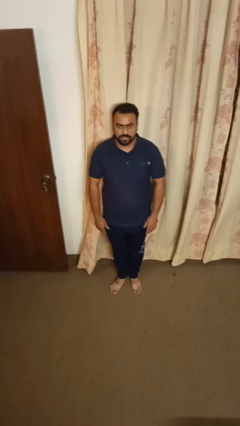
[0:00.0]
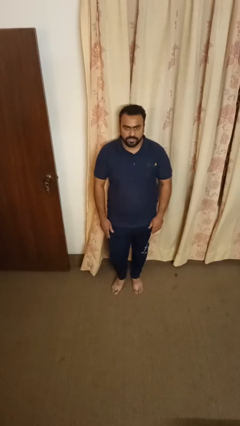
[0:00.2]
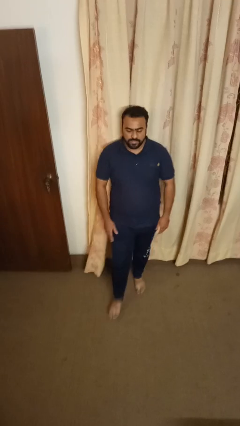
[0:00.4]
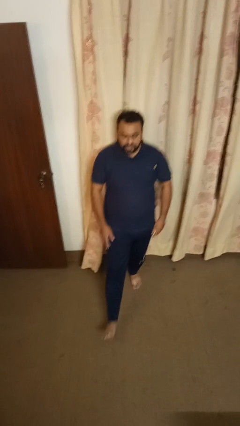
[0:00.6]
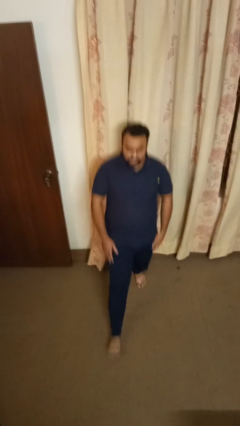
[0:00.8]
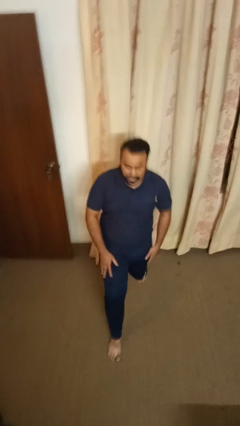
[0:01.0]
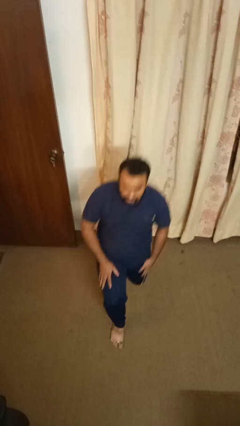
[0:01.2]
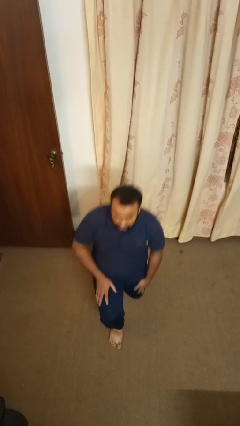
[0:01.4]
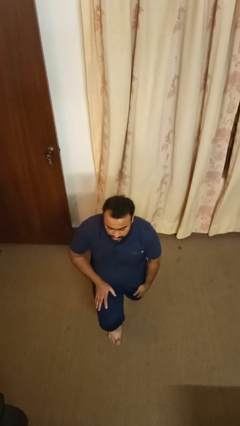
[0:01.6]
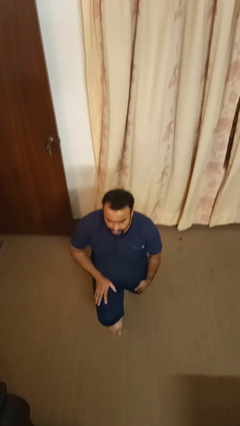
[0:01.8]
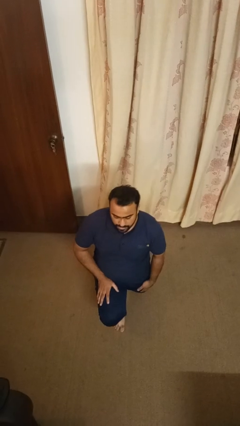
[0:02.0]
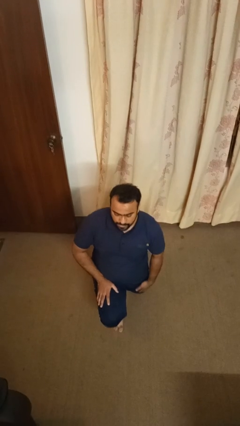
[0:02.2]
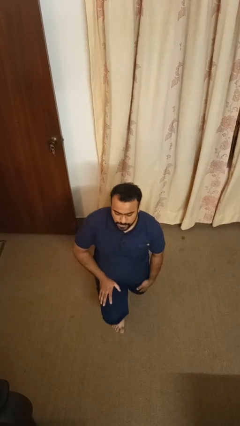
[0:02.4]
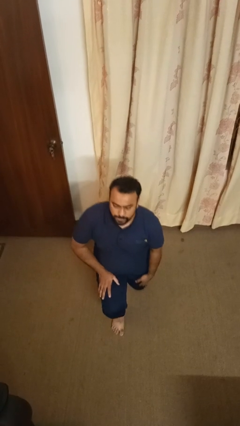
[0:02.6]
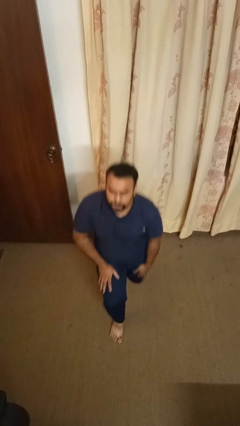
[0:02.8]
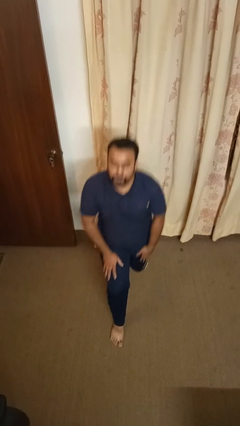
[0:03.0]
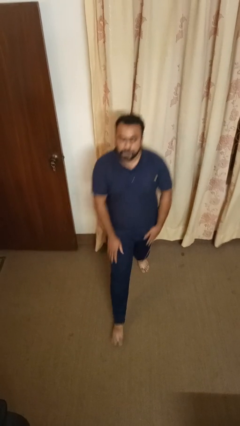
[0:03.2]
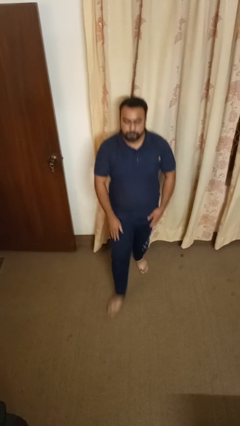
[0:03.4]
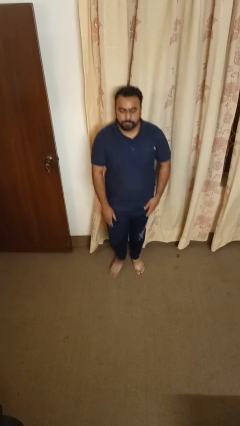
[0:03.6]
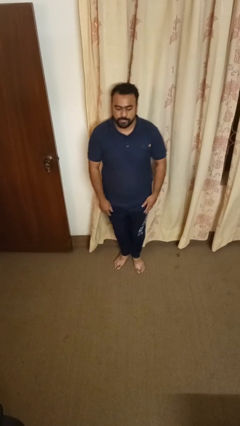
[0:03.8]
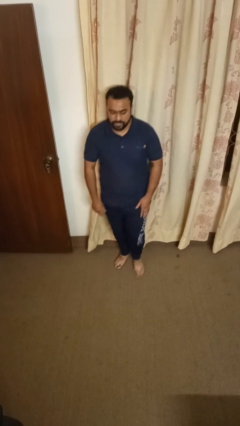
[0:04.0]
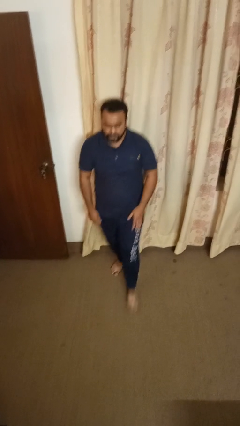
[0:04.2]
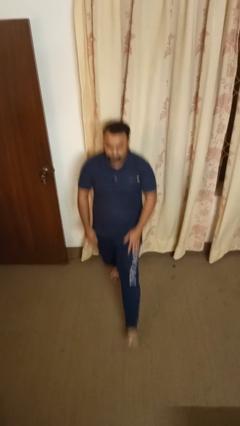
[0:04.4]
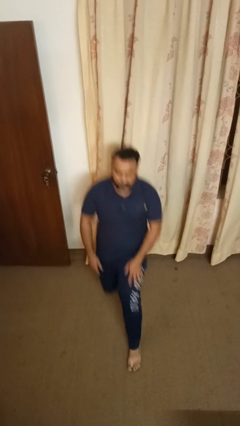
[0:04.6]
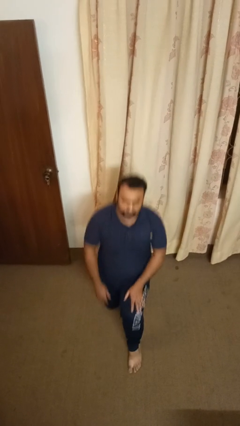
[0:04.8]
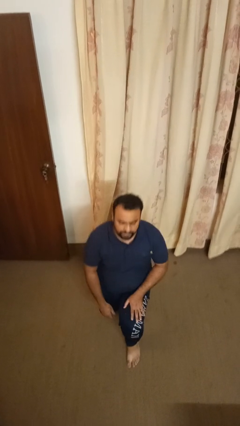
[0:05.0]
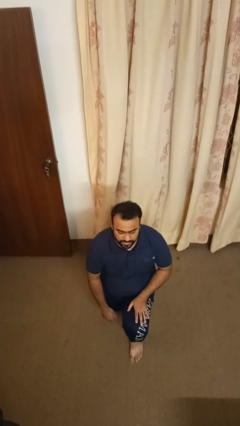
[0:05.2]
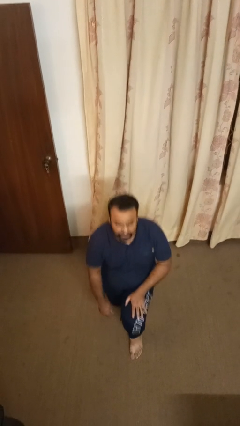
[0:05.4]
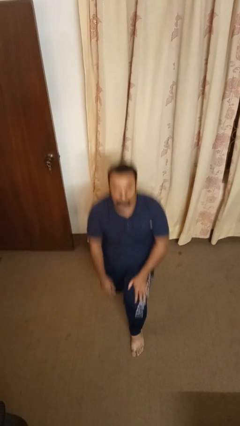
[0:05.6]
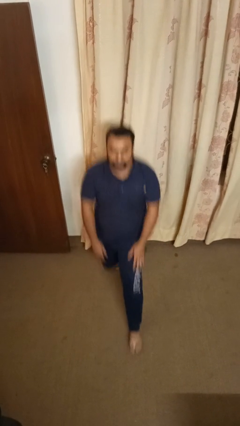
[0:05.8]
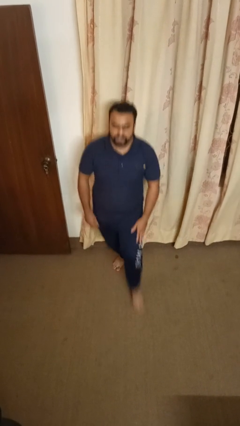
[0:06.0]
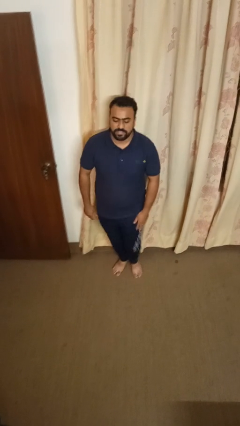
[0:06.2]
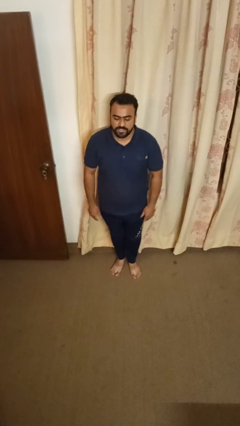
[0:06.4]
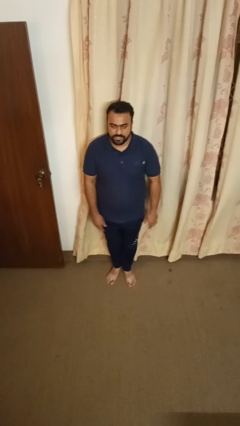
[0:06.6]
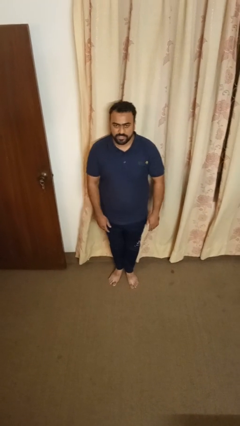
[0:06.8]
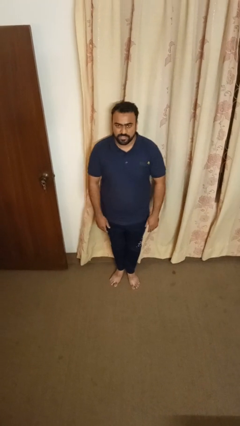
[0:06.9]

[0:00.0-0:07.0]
person exercises with lunges

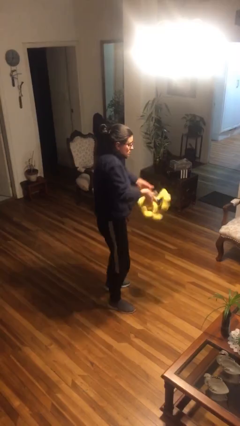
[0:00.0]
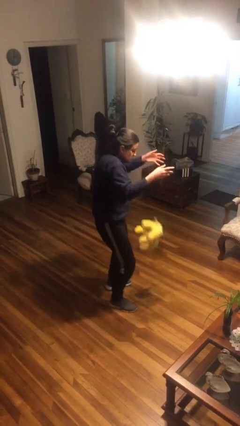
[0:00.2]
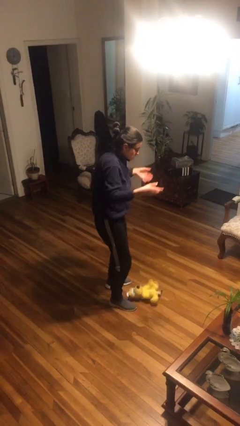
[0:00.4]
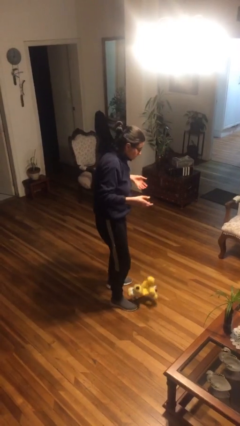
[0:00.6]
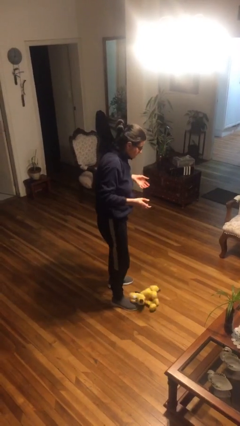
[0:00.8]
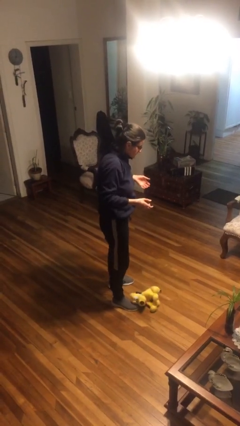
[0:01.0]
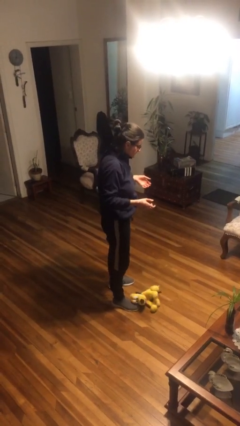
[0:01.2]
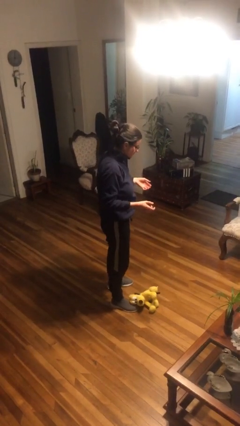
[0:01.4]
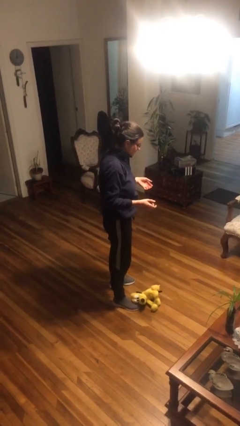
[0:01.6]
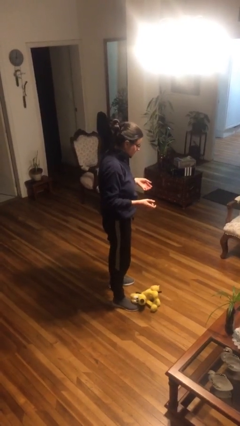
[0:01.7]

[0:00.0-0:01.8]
person drops object

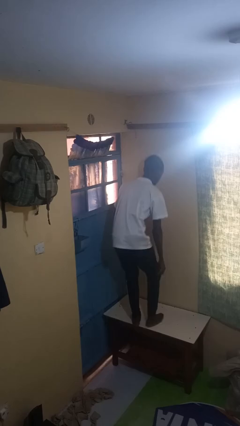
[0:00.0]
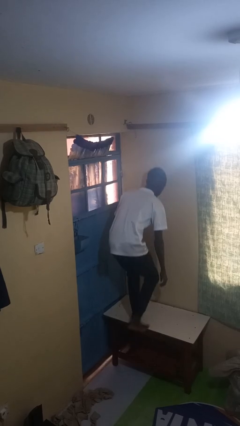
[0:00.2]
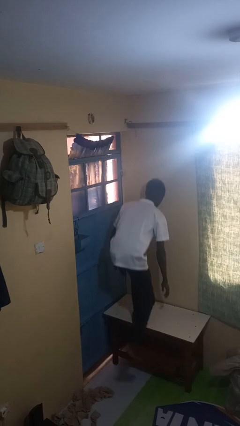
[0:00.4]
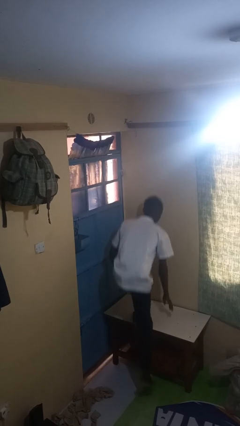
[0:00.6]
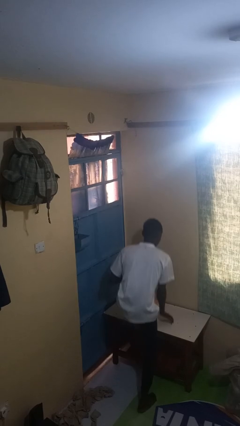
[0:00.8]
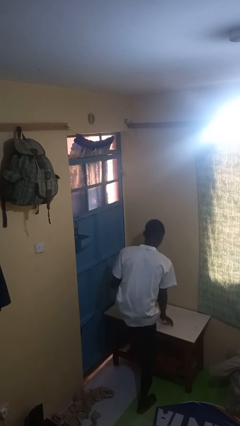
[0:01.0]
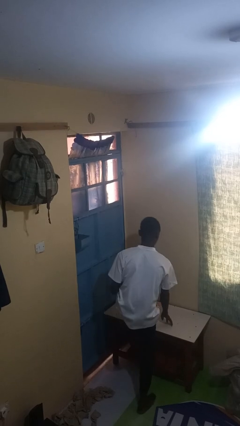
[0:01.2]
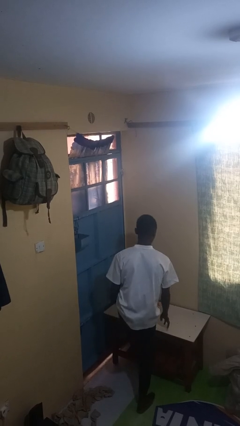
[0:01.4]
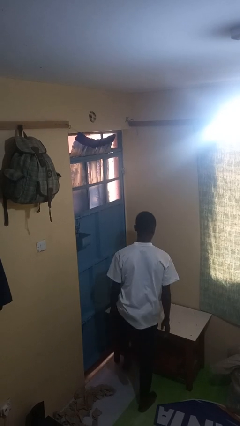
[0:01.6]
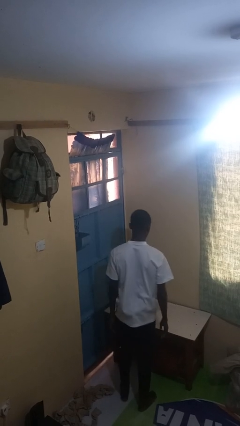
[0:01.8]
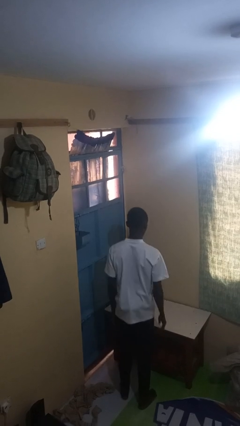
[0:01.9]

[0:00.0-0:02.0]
person climbs off table

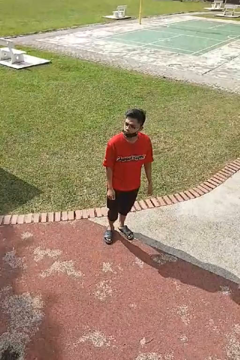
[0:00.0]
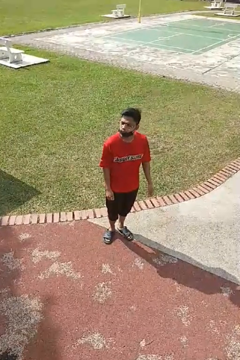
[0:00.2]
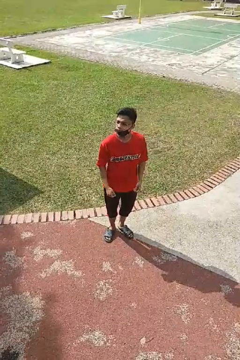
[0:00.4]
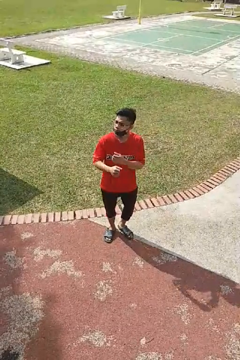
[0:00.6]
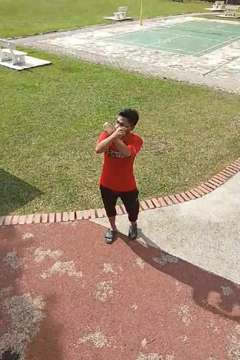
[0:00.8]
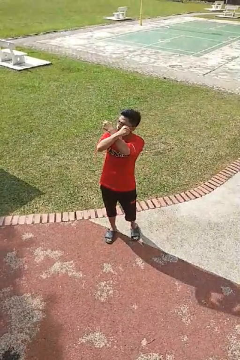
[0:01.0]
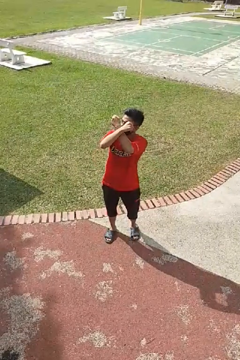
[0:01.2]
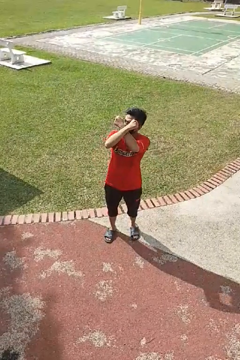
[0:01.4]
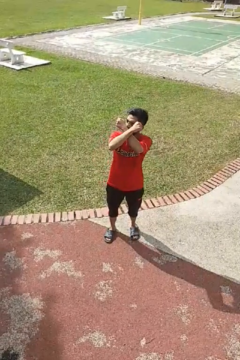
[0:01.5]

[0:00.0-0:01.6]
person gestures arms x

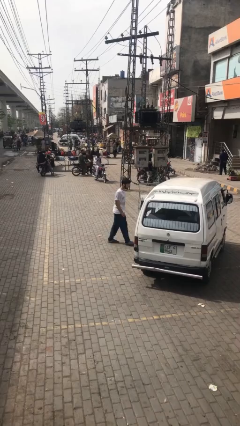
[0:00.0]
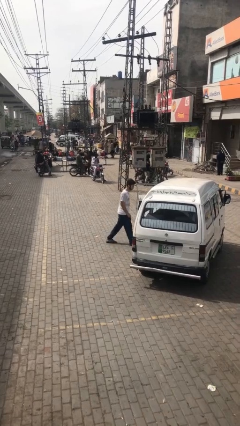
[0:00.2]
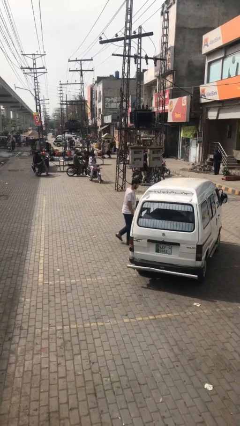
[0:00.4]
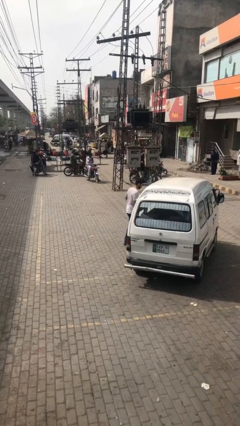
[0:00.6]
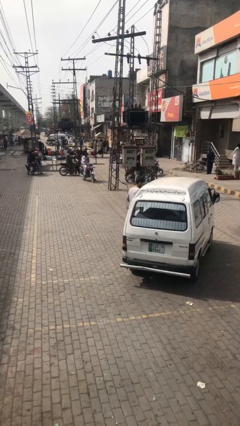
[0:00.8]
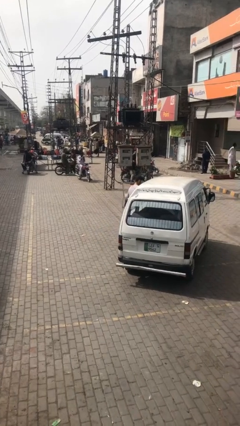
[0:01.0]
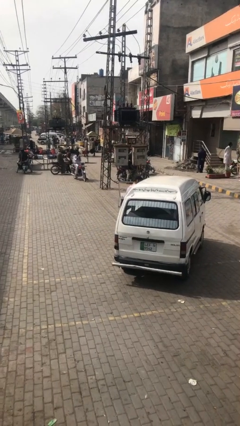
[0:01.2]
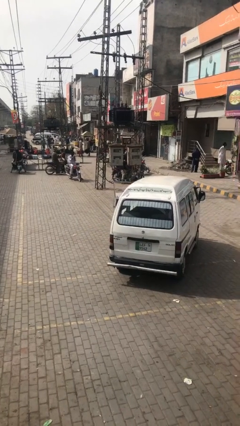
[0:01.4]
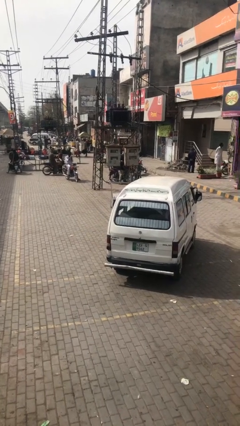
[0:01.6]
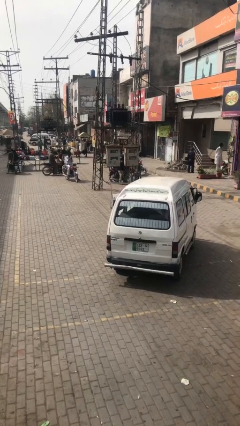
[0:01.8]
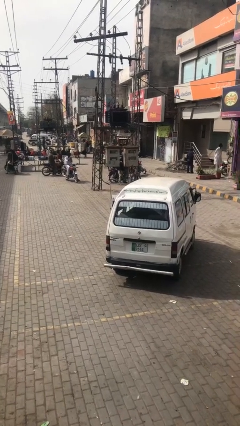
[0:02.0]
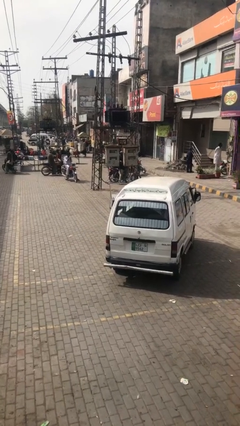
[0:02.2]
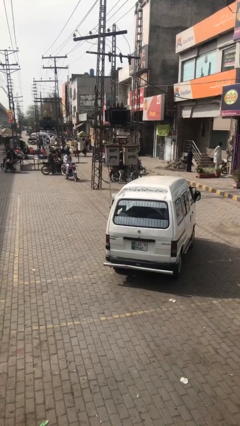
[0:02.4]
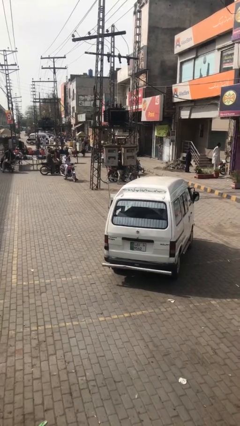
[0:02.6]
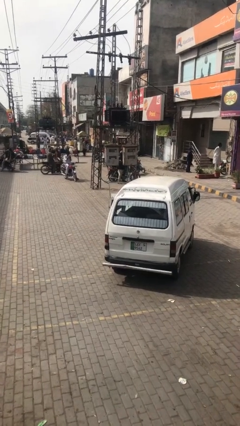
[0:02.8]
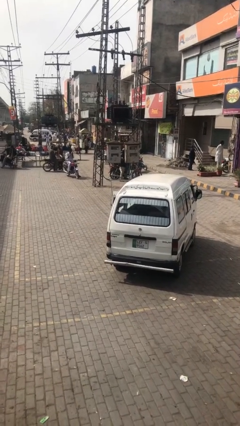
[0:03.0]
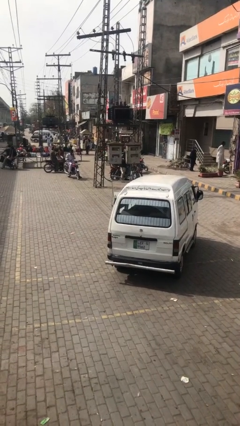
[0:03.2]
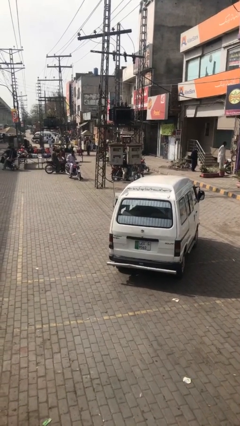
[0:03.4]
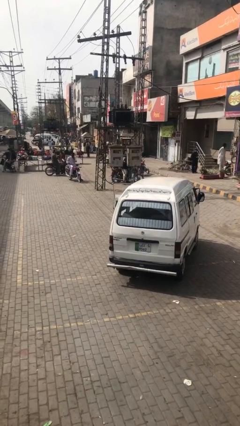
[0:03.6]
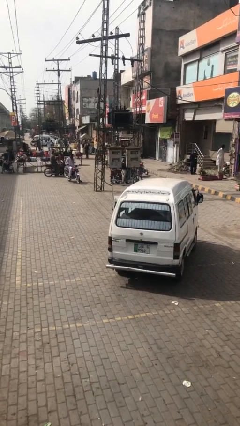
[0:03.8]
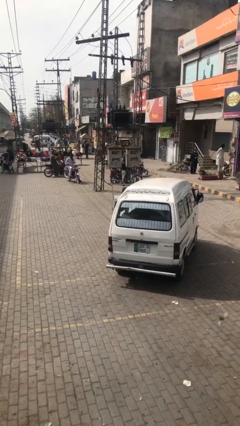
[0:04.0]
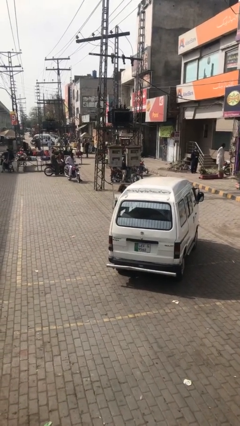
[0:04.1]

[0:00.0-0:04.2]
person enters car

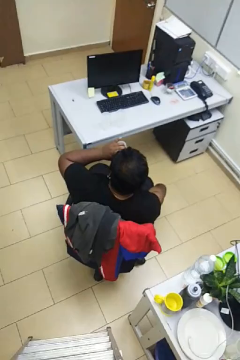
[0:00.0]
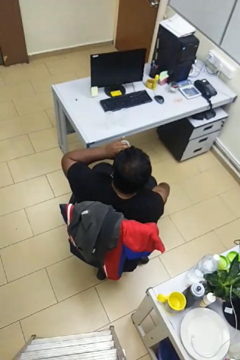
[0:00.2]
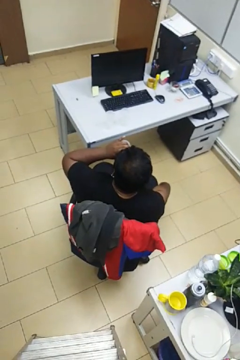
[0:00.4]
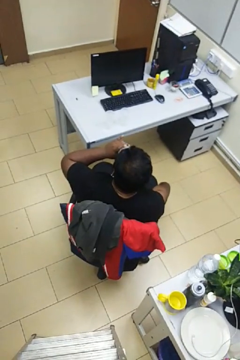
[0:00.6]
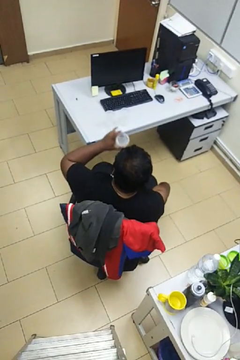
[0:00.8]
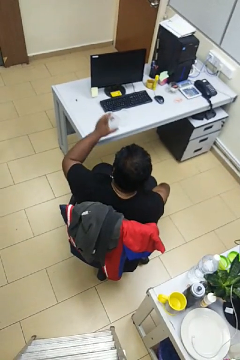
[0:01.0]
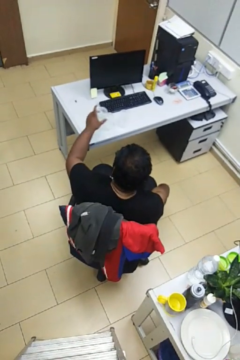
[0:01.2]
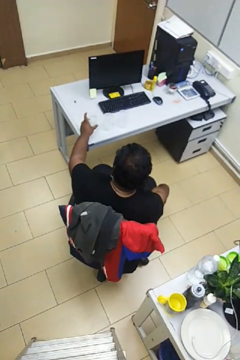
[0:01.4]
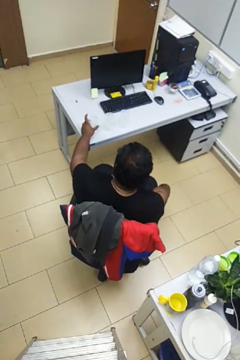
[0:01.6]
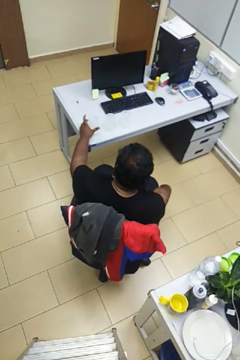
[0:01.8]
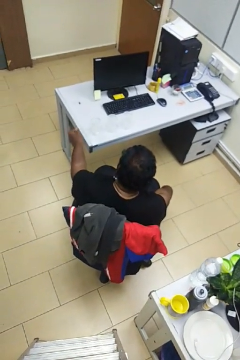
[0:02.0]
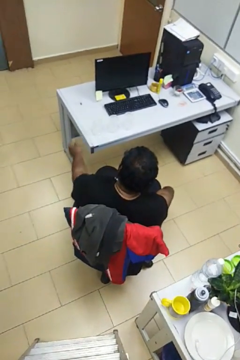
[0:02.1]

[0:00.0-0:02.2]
person puts down object on table
